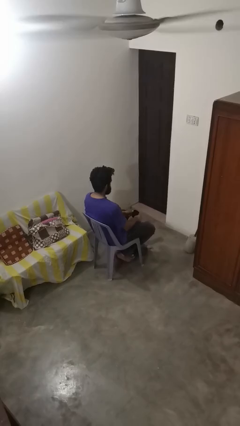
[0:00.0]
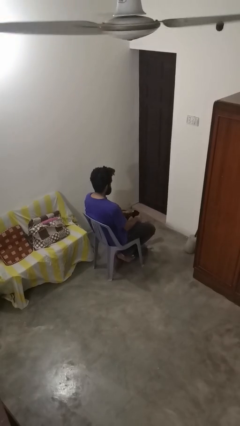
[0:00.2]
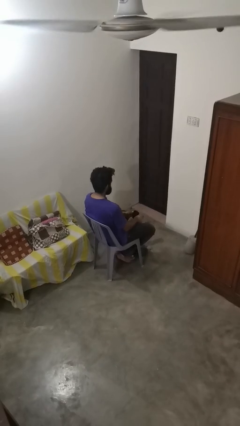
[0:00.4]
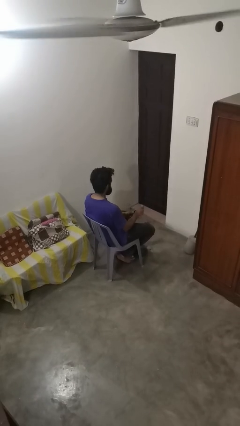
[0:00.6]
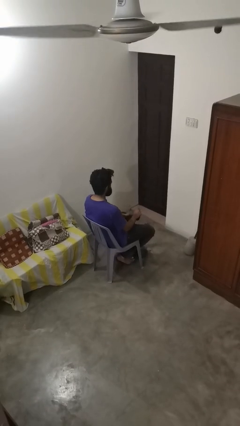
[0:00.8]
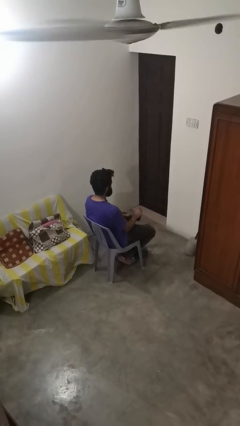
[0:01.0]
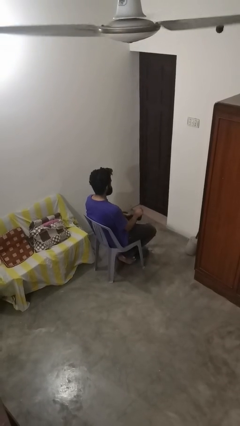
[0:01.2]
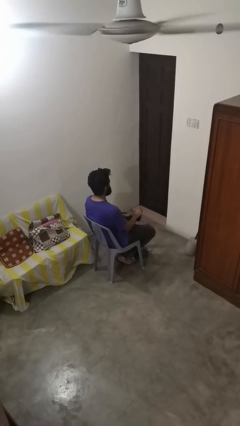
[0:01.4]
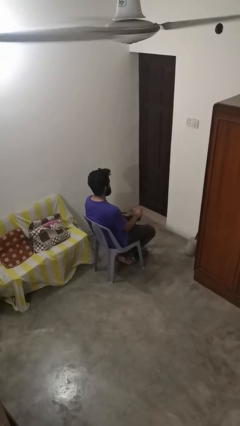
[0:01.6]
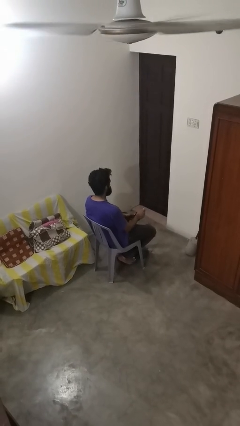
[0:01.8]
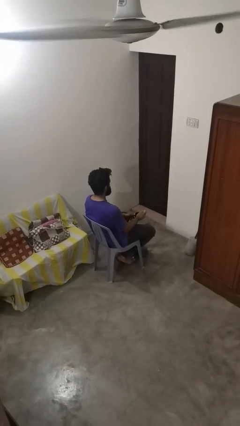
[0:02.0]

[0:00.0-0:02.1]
person stirs mug

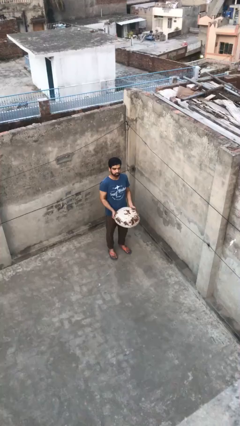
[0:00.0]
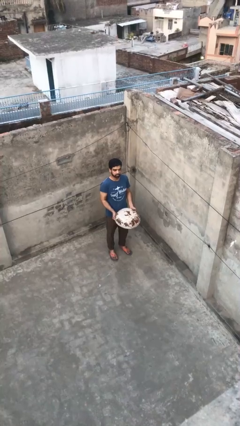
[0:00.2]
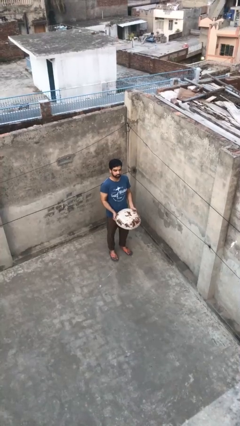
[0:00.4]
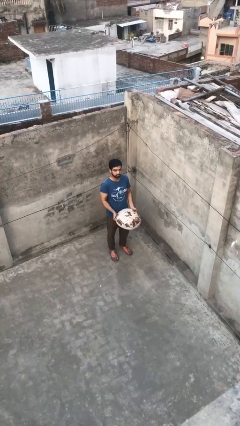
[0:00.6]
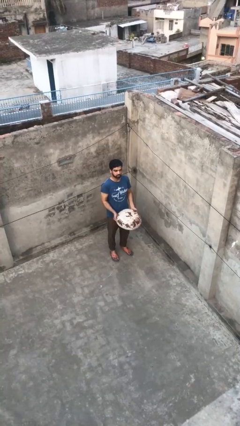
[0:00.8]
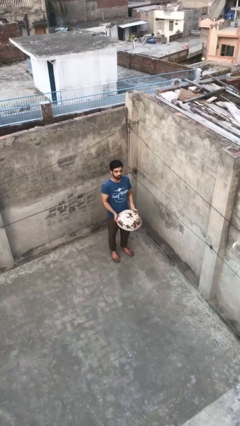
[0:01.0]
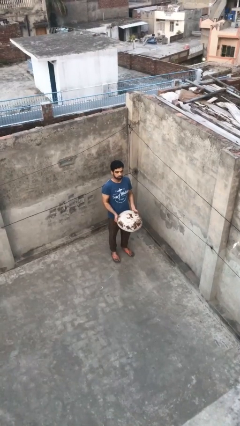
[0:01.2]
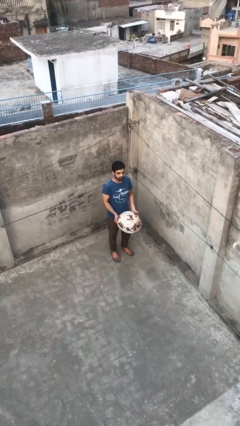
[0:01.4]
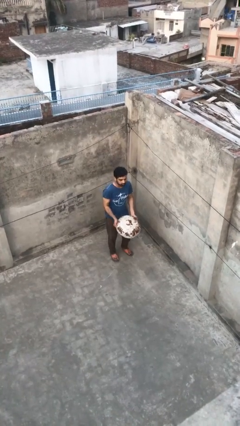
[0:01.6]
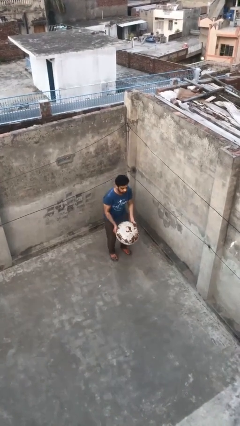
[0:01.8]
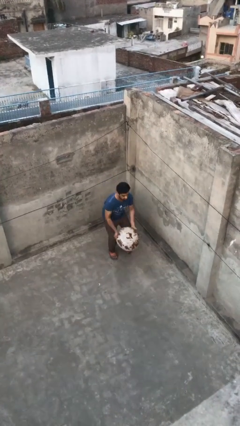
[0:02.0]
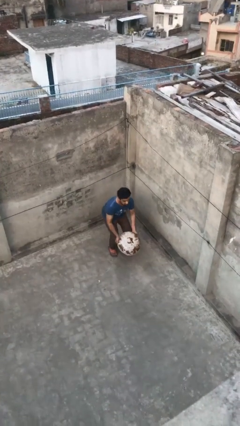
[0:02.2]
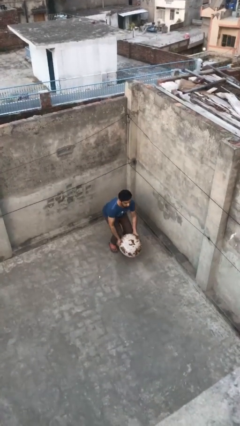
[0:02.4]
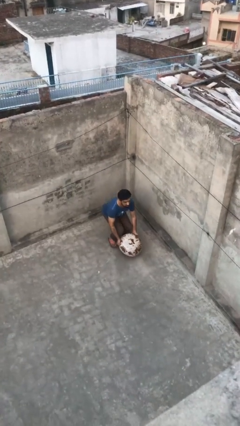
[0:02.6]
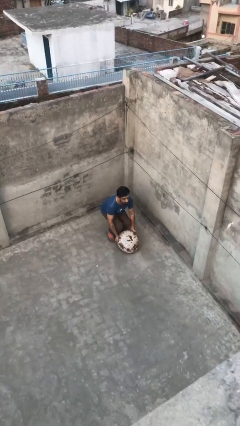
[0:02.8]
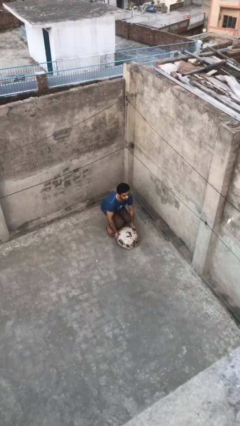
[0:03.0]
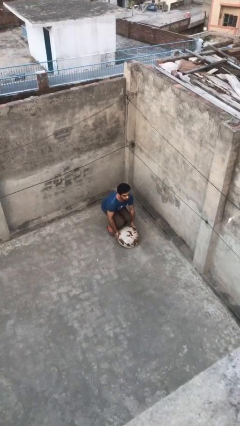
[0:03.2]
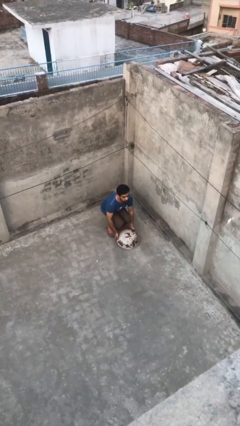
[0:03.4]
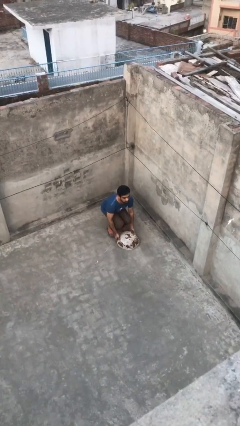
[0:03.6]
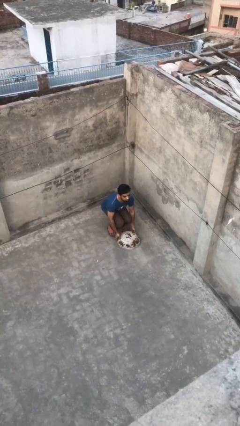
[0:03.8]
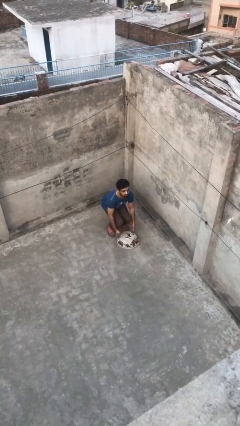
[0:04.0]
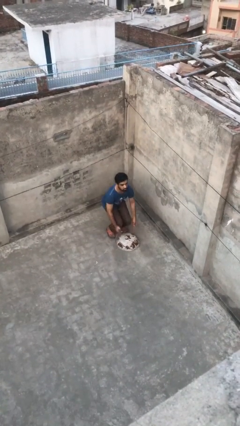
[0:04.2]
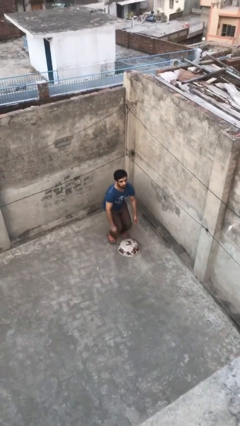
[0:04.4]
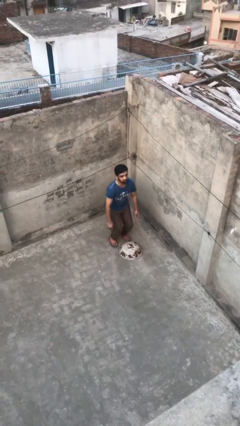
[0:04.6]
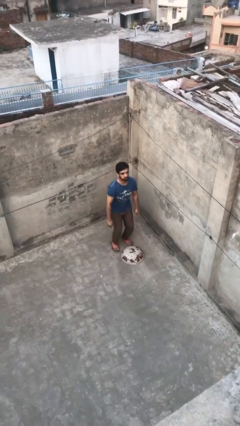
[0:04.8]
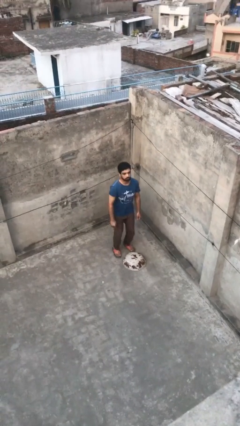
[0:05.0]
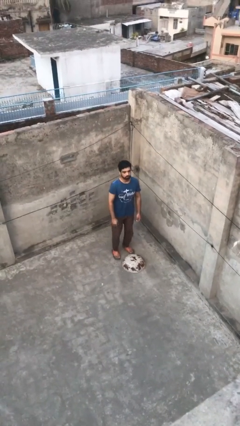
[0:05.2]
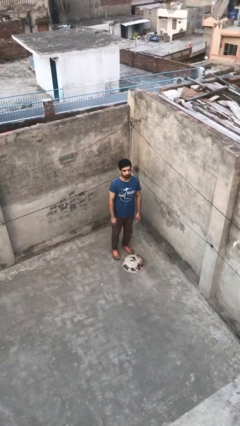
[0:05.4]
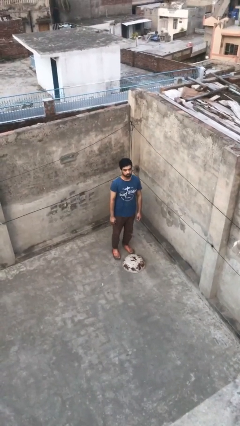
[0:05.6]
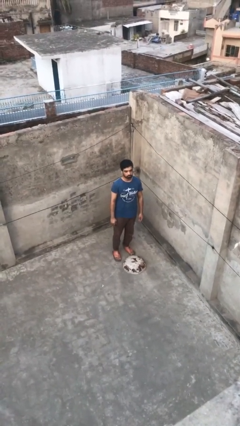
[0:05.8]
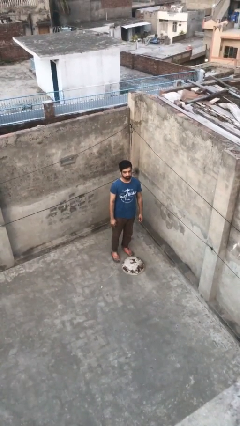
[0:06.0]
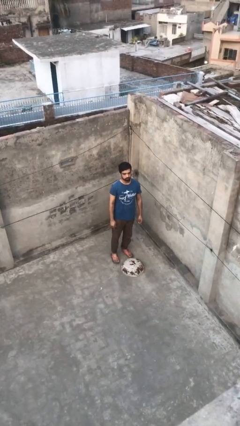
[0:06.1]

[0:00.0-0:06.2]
person puts down object on floor

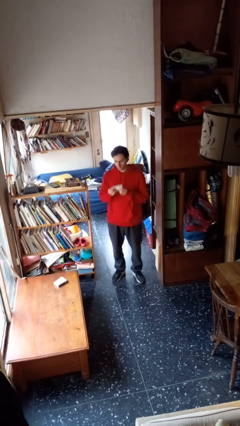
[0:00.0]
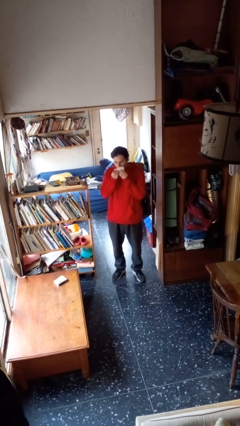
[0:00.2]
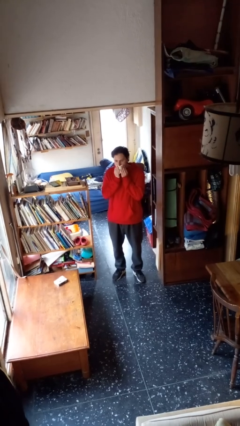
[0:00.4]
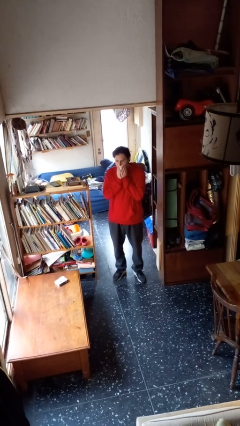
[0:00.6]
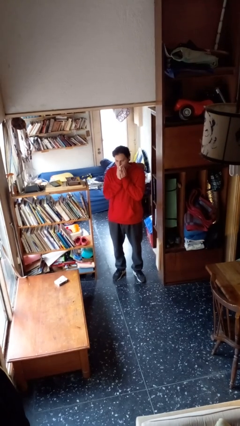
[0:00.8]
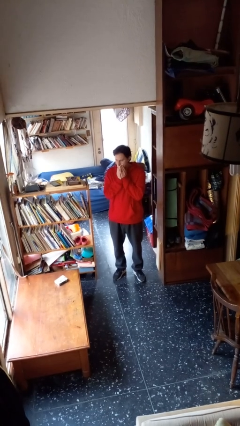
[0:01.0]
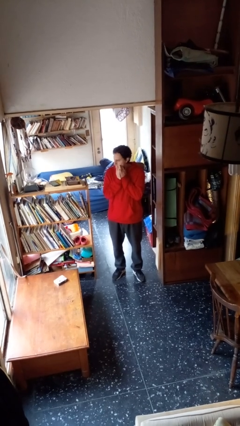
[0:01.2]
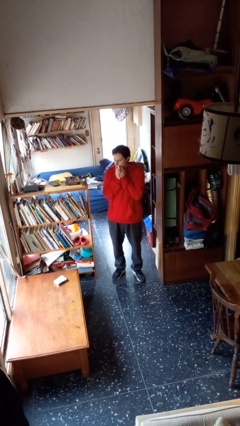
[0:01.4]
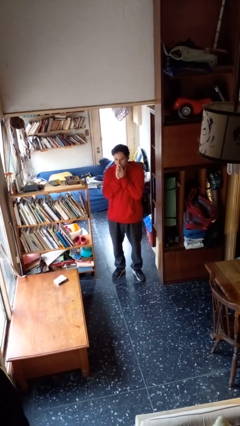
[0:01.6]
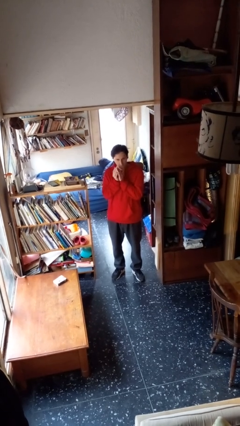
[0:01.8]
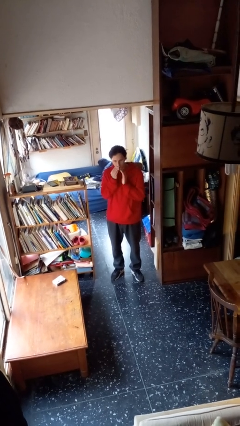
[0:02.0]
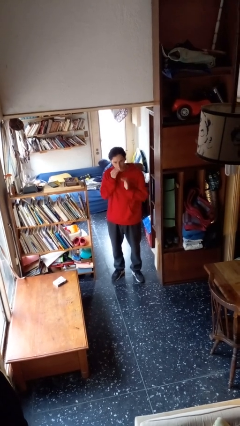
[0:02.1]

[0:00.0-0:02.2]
person wipes mouth with napkin

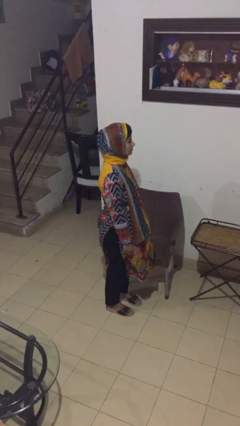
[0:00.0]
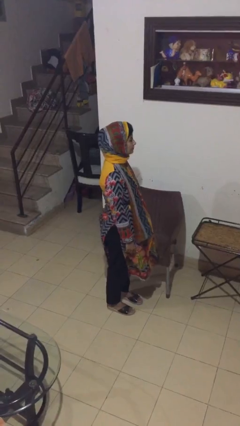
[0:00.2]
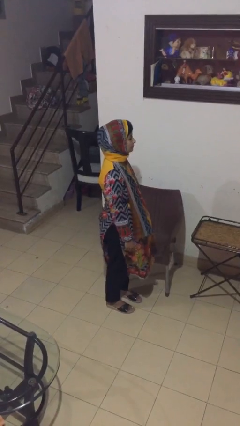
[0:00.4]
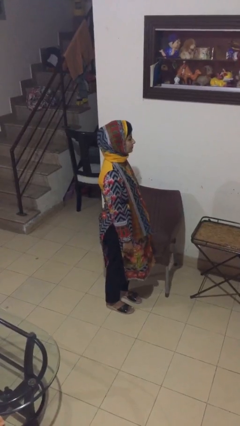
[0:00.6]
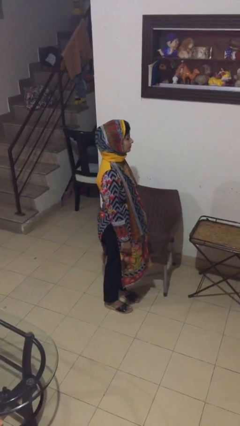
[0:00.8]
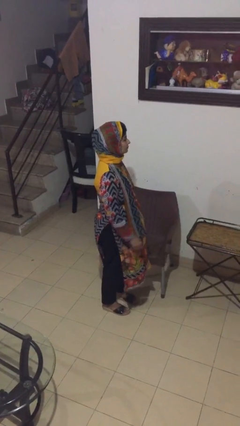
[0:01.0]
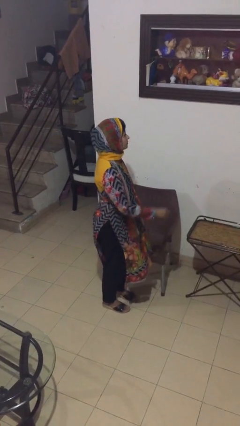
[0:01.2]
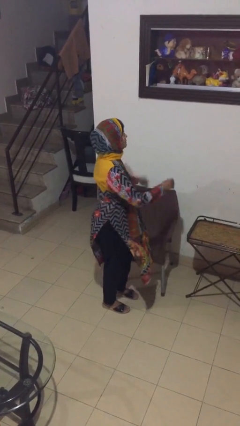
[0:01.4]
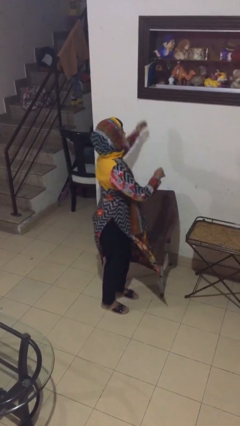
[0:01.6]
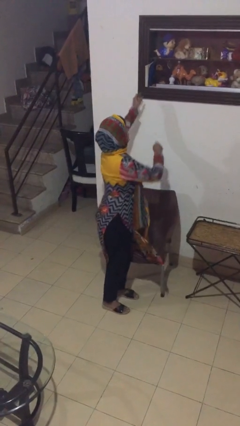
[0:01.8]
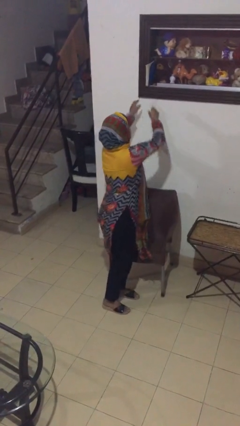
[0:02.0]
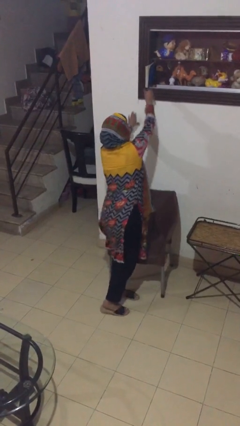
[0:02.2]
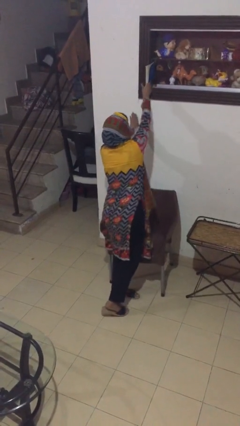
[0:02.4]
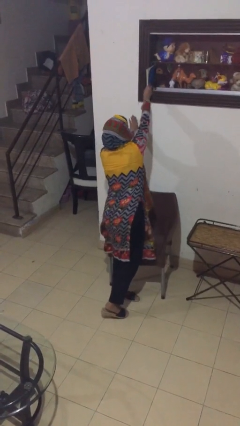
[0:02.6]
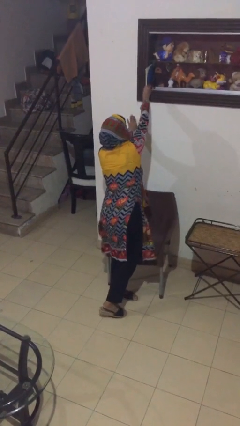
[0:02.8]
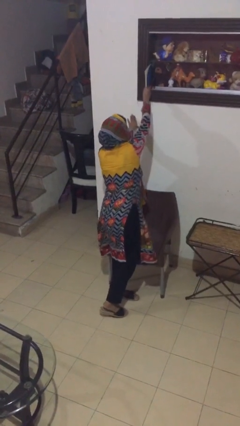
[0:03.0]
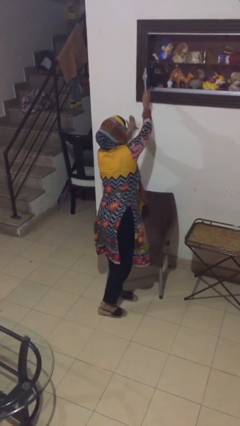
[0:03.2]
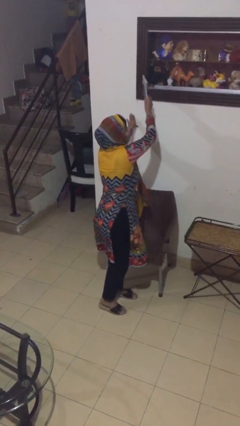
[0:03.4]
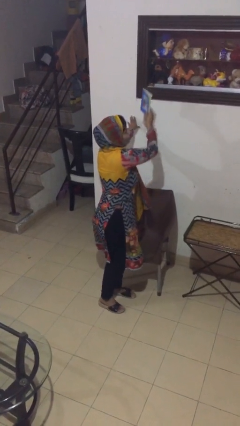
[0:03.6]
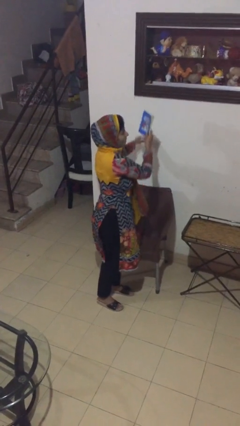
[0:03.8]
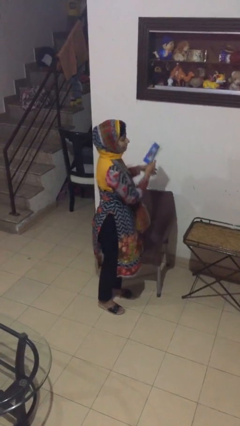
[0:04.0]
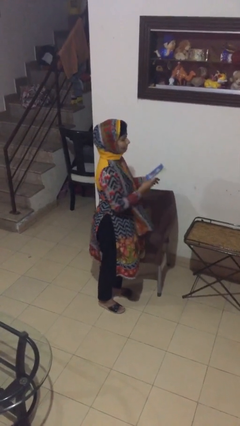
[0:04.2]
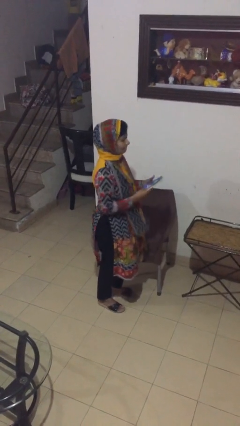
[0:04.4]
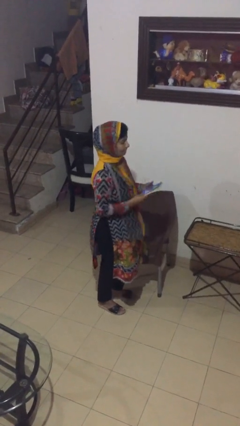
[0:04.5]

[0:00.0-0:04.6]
person picks up object from shelf

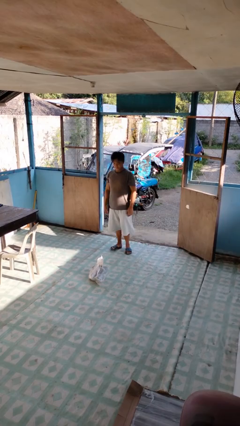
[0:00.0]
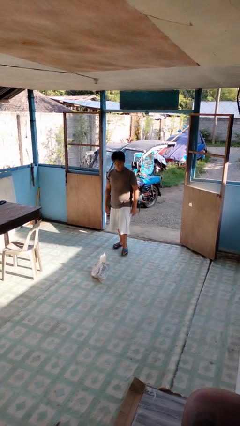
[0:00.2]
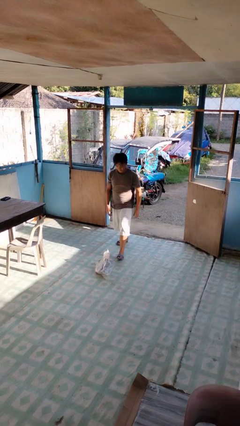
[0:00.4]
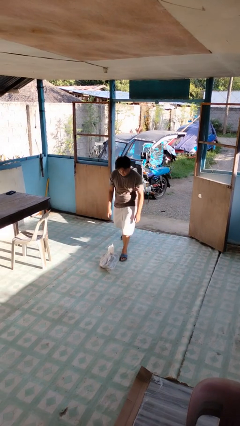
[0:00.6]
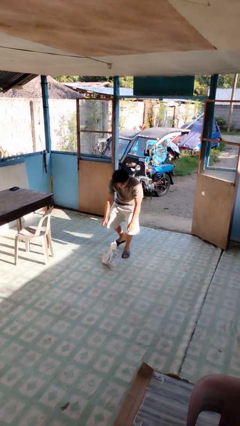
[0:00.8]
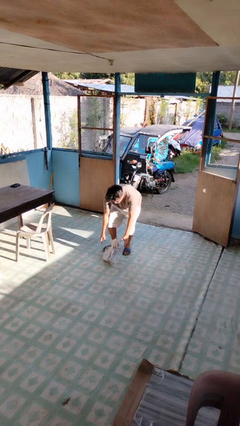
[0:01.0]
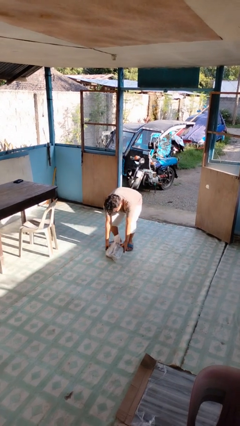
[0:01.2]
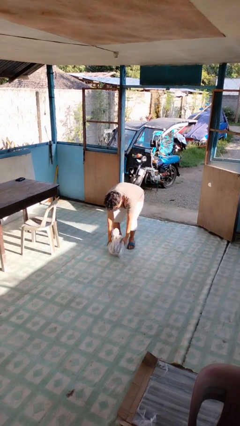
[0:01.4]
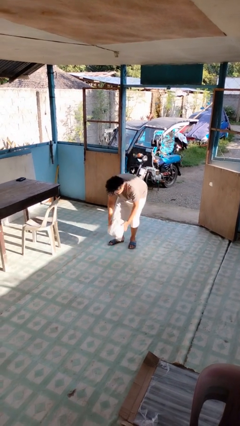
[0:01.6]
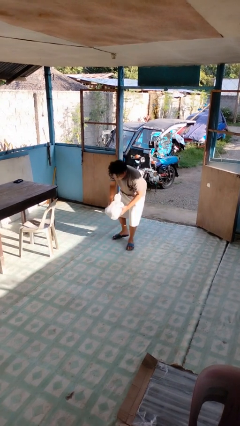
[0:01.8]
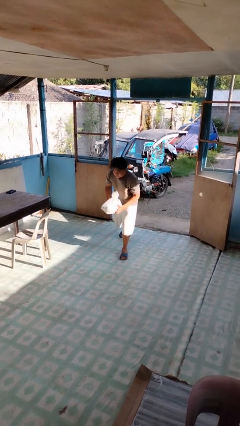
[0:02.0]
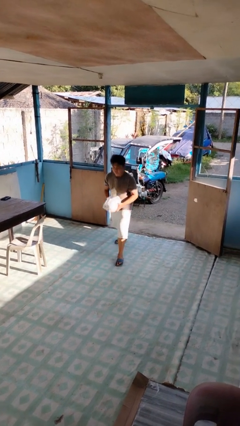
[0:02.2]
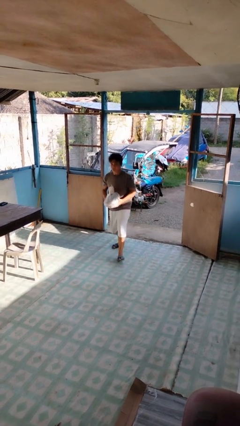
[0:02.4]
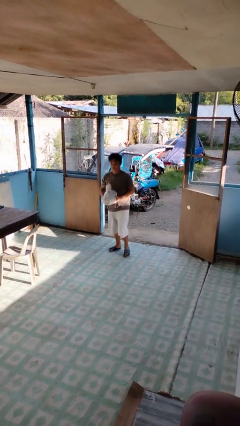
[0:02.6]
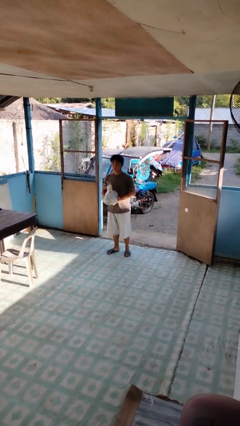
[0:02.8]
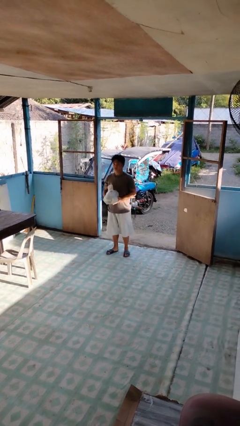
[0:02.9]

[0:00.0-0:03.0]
person picks up object from floor
